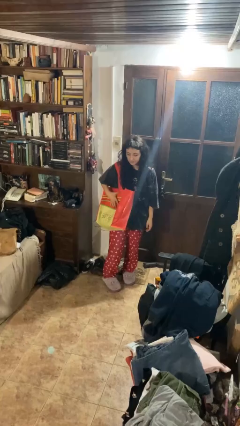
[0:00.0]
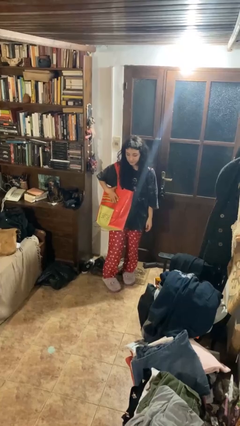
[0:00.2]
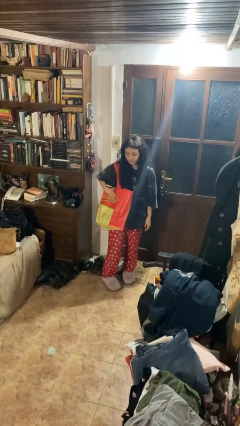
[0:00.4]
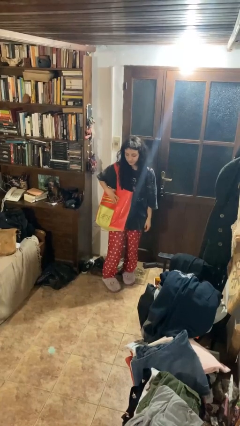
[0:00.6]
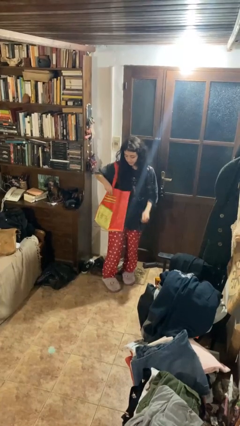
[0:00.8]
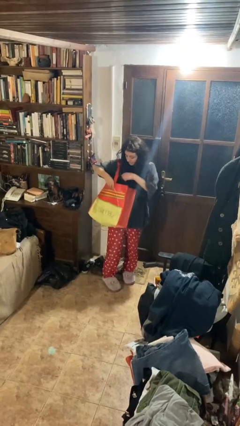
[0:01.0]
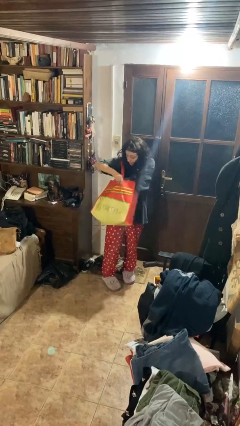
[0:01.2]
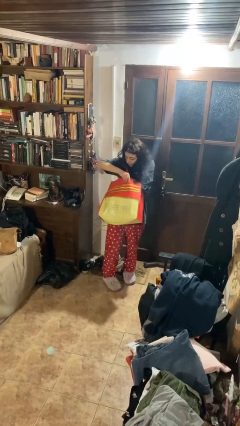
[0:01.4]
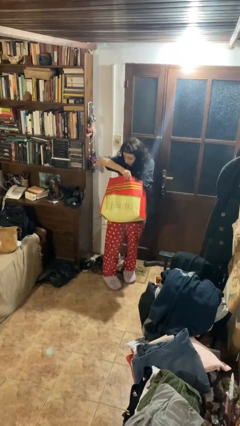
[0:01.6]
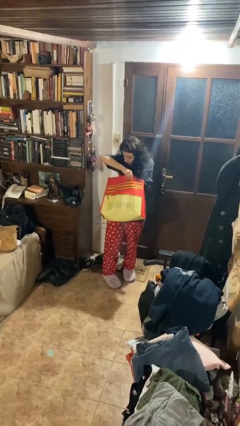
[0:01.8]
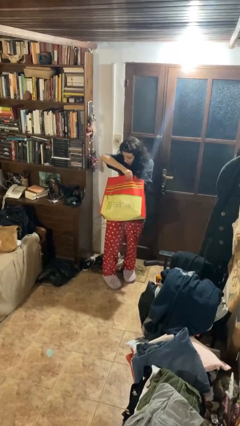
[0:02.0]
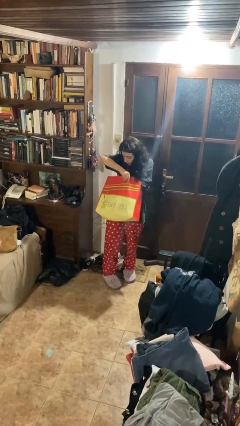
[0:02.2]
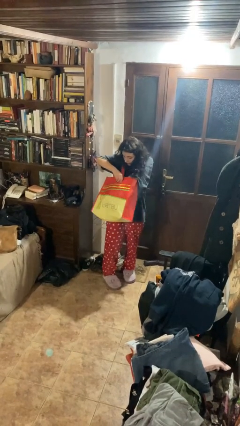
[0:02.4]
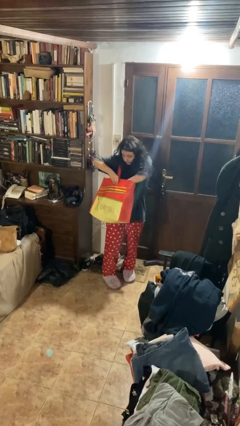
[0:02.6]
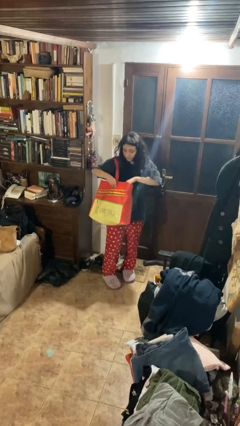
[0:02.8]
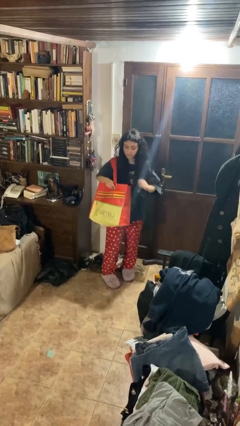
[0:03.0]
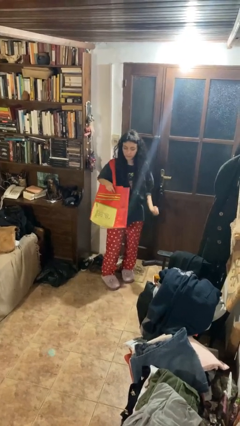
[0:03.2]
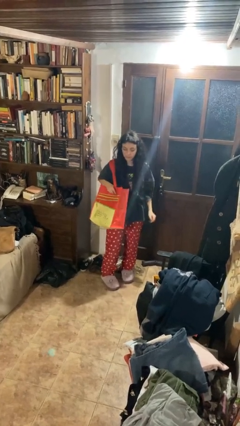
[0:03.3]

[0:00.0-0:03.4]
person searches in bag

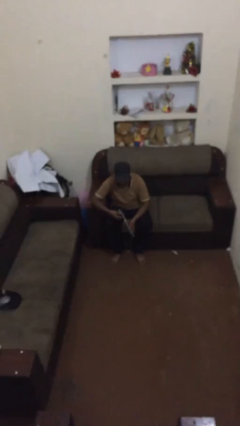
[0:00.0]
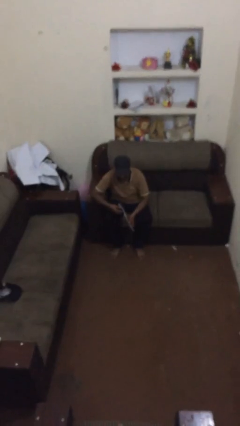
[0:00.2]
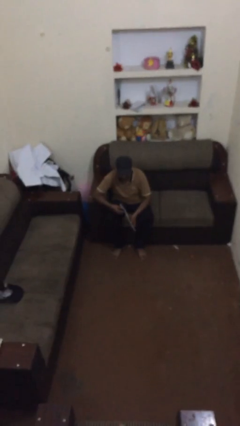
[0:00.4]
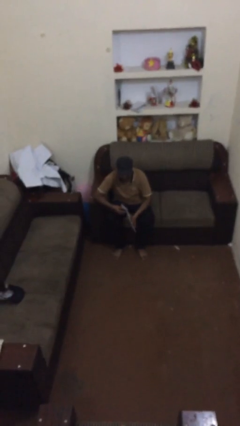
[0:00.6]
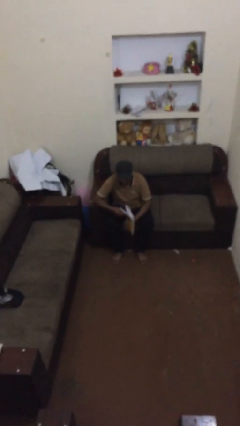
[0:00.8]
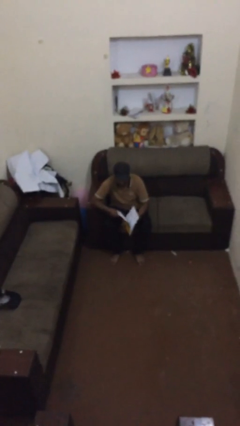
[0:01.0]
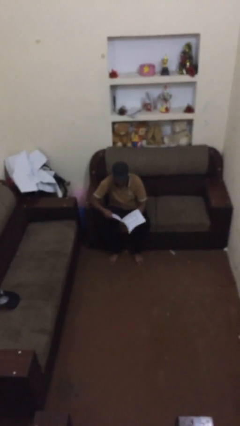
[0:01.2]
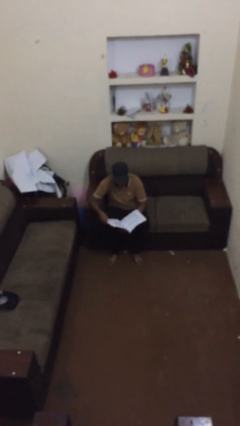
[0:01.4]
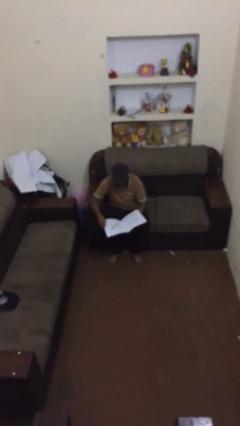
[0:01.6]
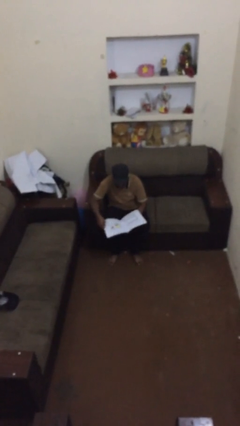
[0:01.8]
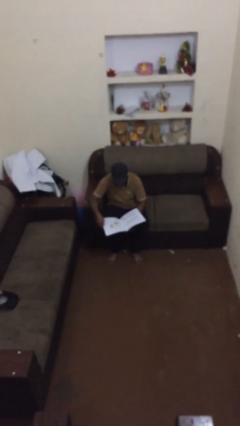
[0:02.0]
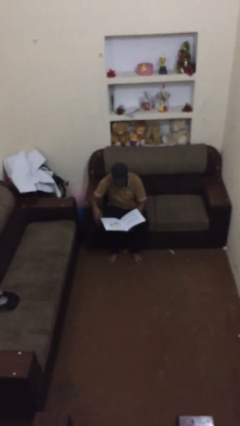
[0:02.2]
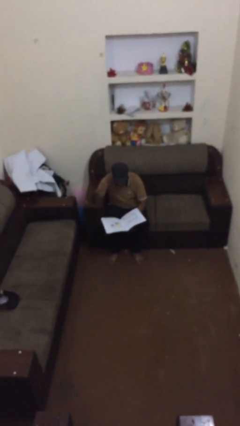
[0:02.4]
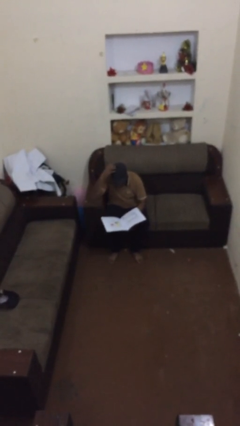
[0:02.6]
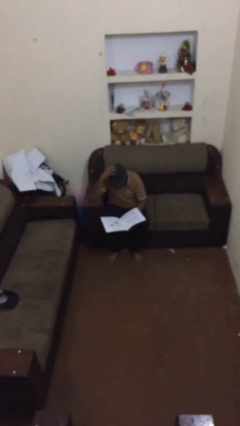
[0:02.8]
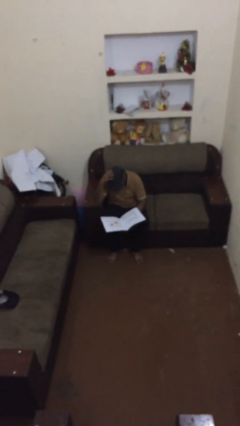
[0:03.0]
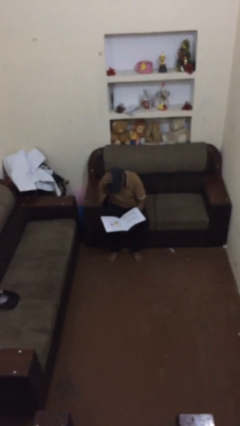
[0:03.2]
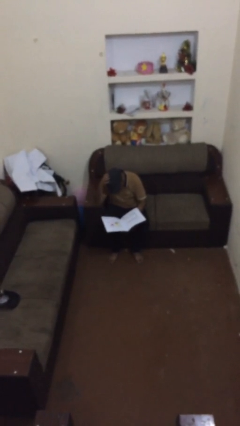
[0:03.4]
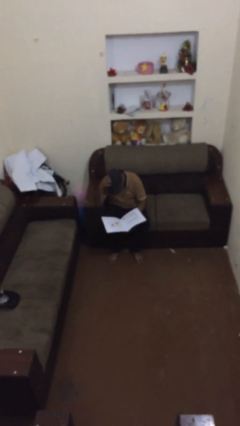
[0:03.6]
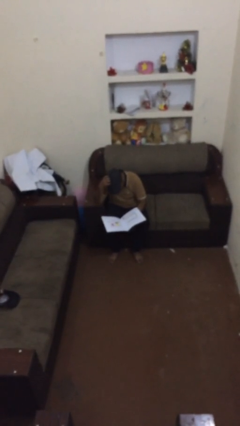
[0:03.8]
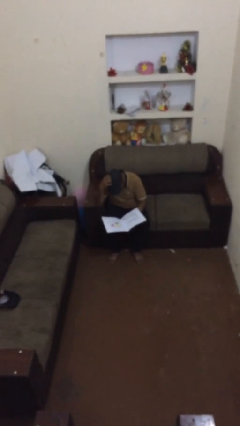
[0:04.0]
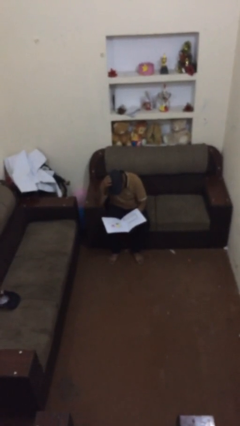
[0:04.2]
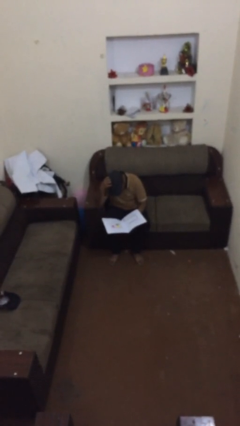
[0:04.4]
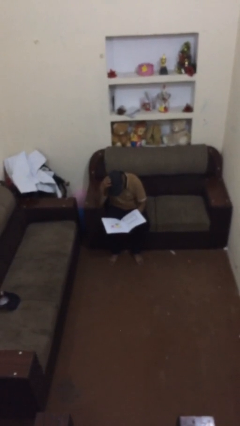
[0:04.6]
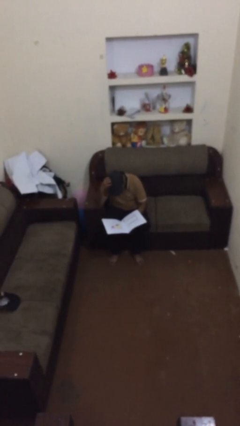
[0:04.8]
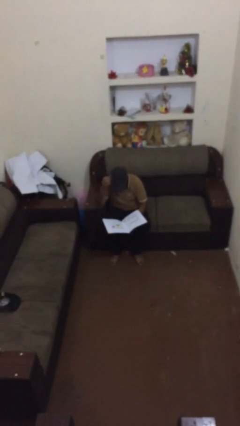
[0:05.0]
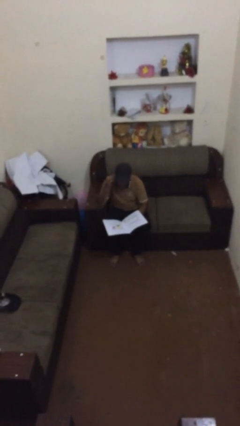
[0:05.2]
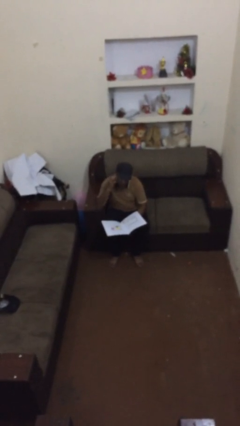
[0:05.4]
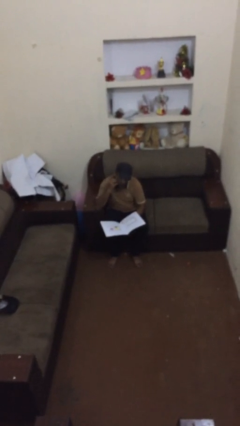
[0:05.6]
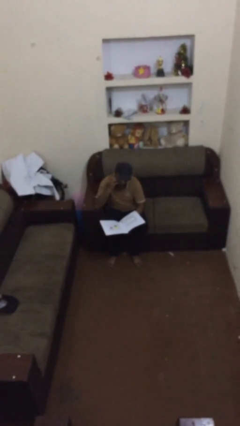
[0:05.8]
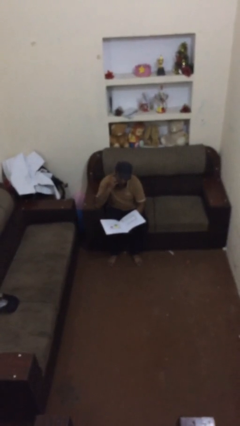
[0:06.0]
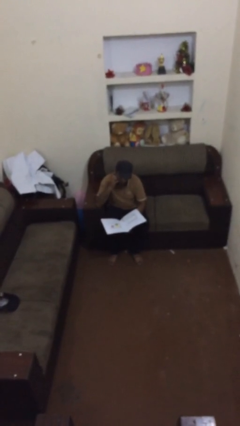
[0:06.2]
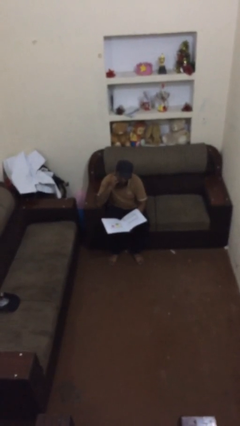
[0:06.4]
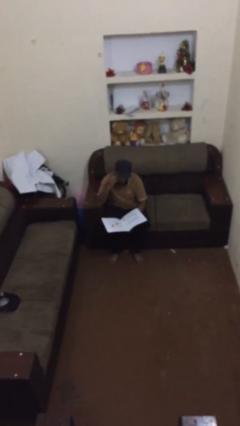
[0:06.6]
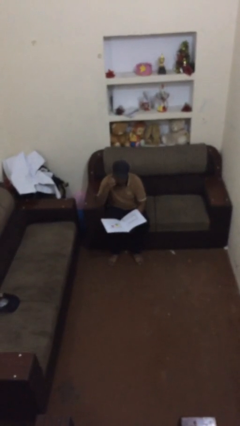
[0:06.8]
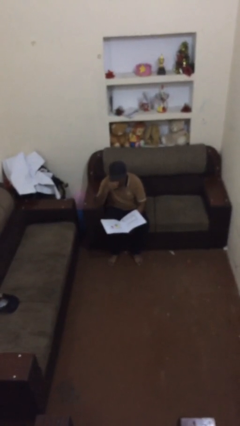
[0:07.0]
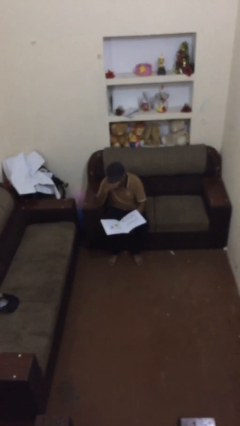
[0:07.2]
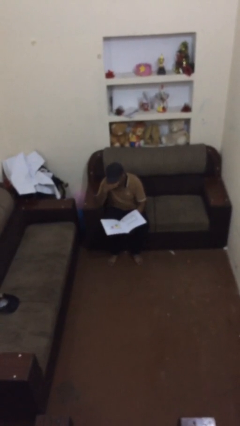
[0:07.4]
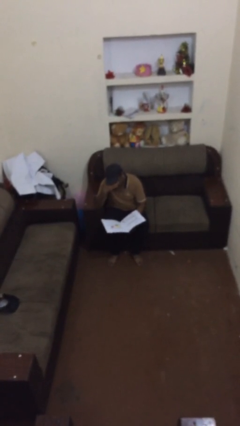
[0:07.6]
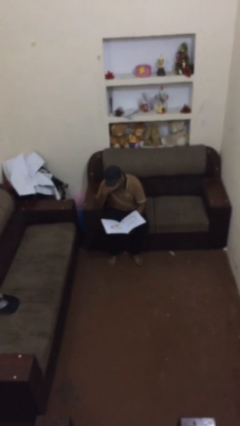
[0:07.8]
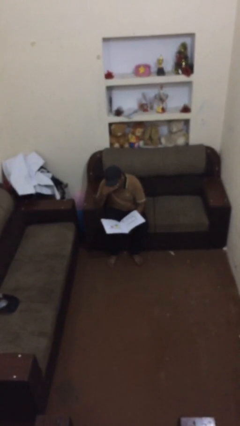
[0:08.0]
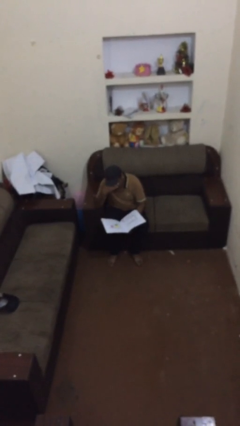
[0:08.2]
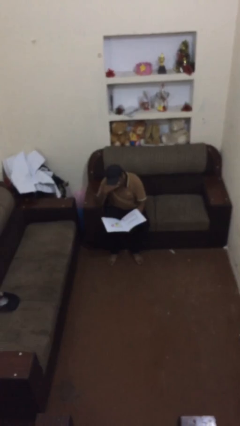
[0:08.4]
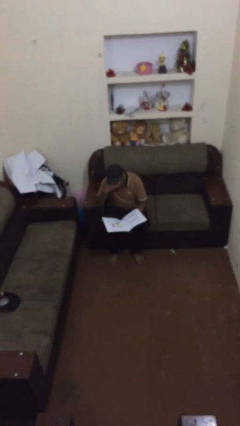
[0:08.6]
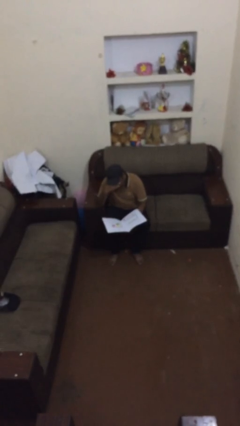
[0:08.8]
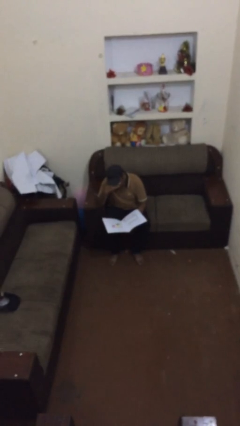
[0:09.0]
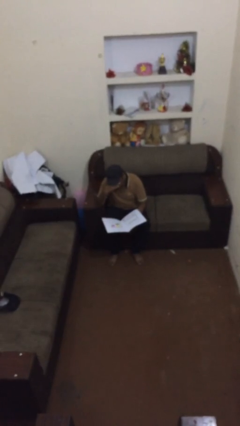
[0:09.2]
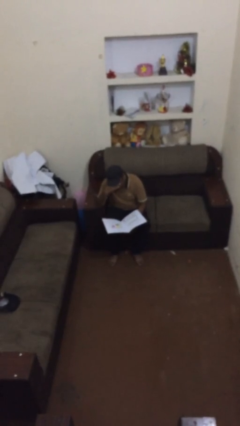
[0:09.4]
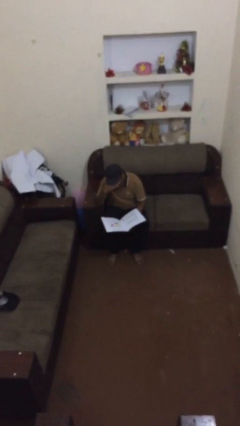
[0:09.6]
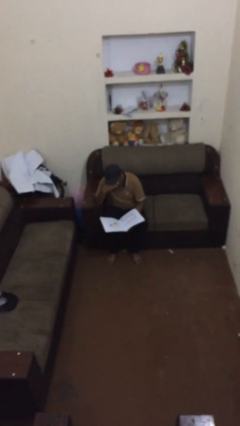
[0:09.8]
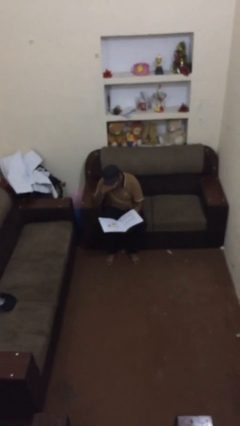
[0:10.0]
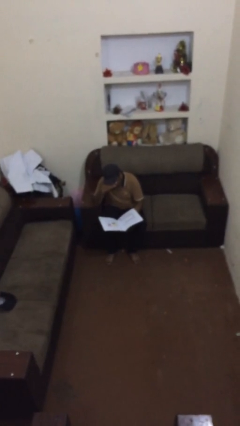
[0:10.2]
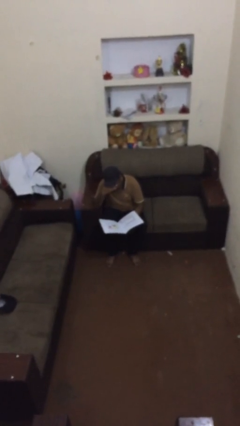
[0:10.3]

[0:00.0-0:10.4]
person reads document

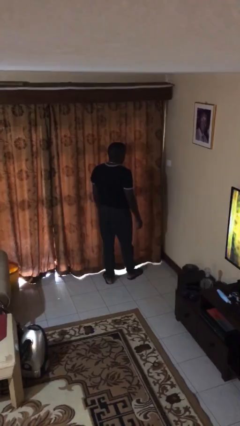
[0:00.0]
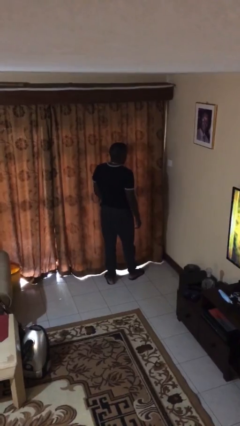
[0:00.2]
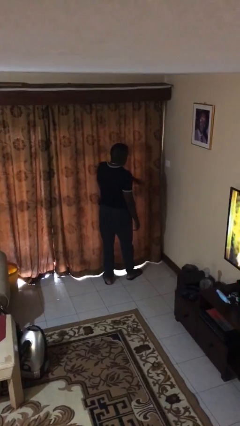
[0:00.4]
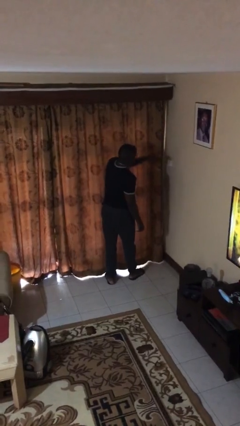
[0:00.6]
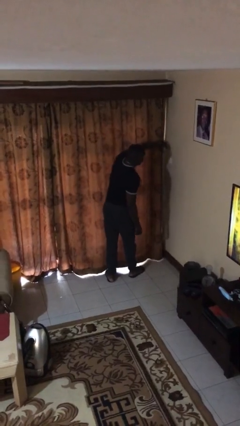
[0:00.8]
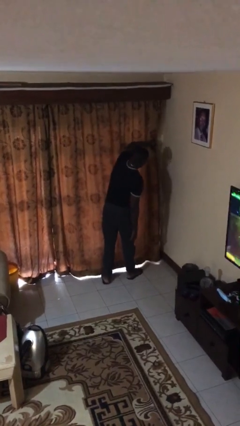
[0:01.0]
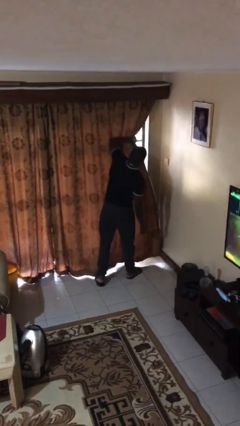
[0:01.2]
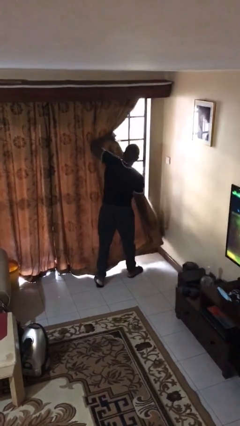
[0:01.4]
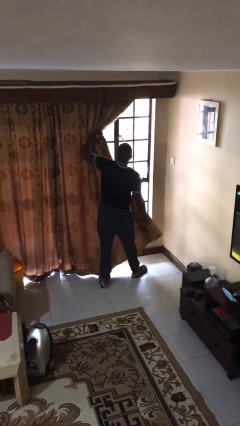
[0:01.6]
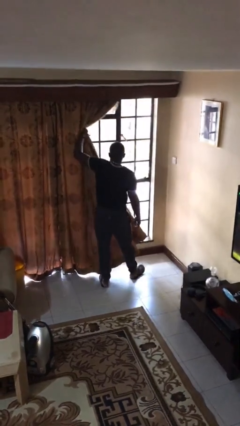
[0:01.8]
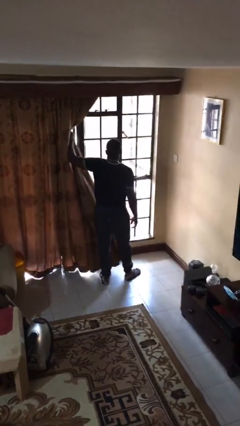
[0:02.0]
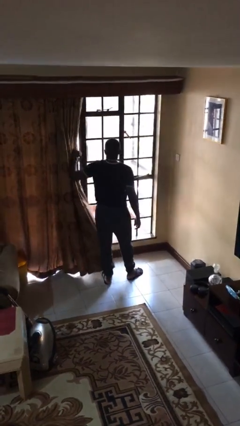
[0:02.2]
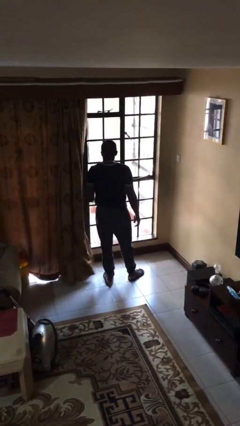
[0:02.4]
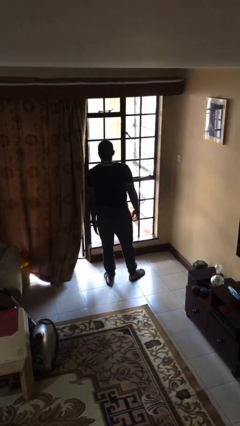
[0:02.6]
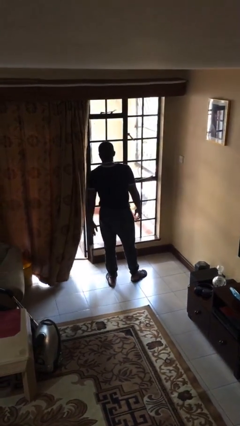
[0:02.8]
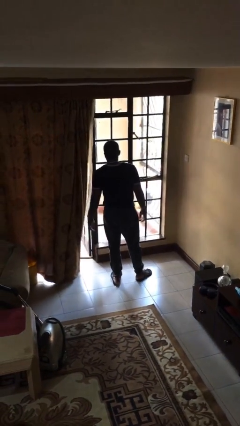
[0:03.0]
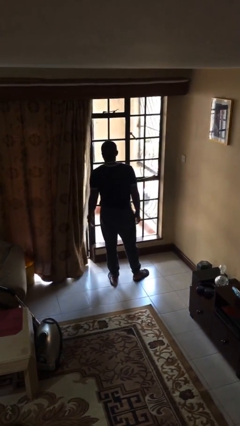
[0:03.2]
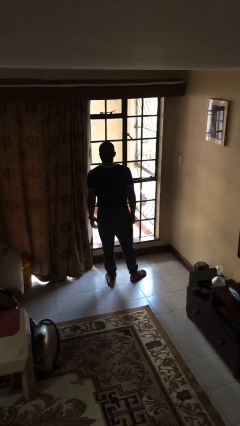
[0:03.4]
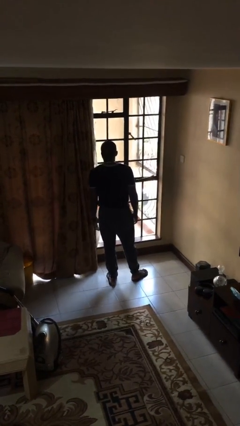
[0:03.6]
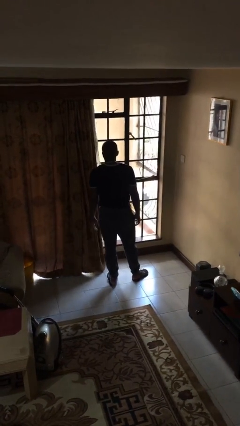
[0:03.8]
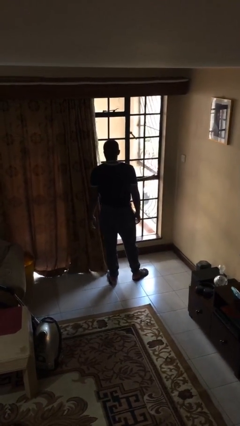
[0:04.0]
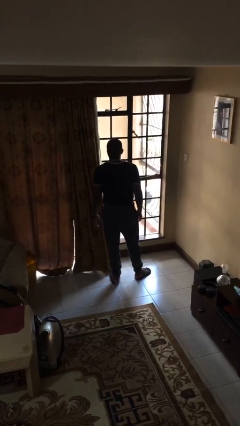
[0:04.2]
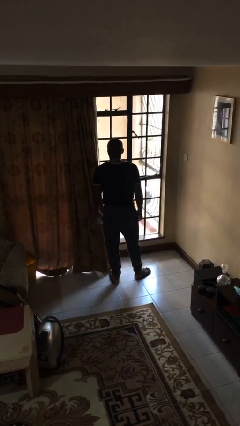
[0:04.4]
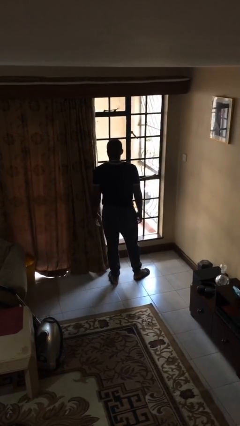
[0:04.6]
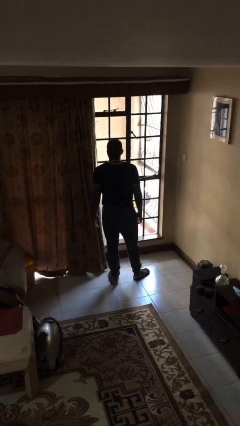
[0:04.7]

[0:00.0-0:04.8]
person opens curtains
